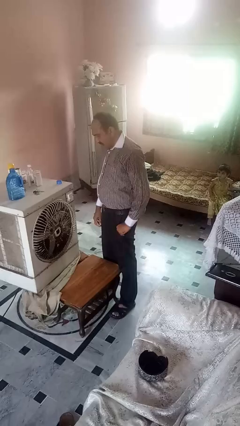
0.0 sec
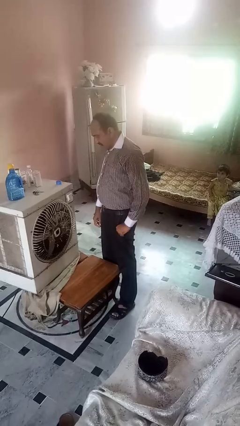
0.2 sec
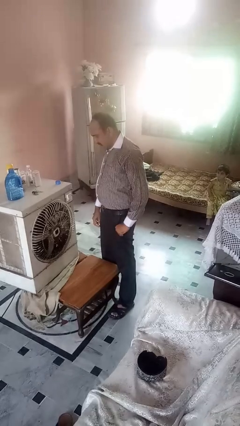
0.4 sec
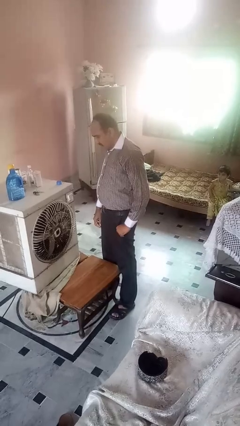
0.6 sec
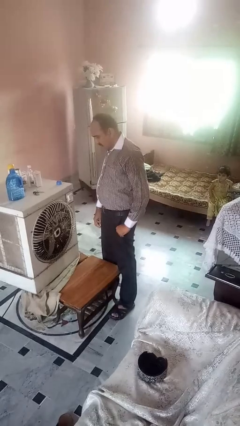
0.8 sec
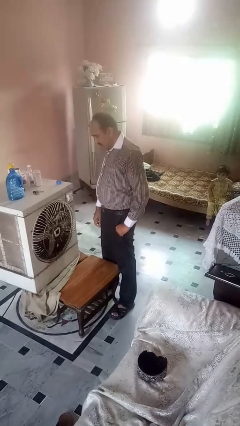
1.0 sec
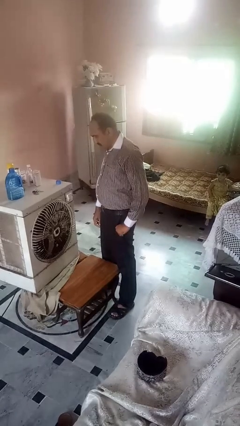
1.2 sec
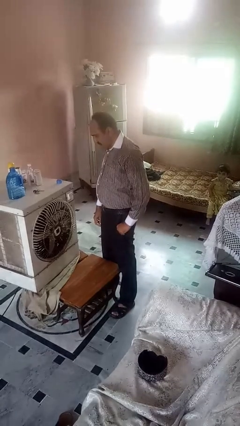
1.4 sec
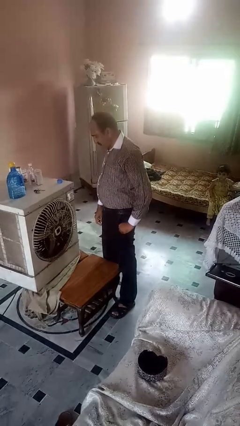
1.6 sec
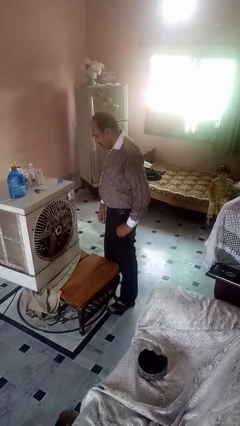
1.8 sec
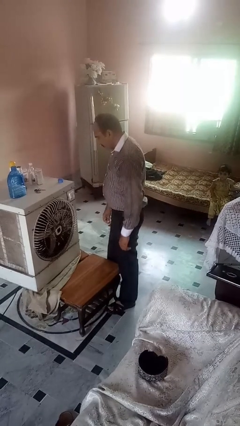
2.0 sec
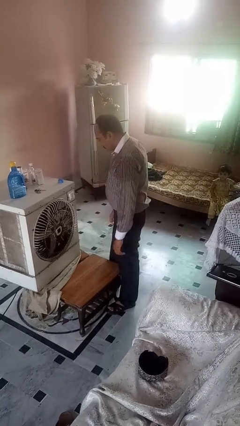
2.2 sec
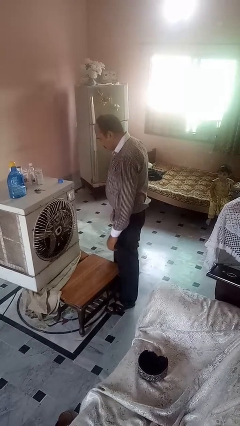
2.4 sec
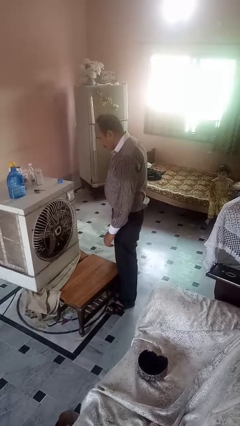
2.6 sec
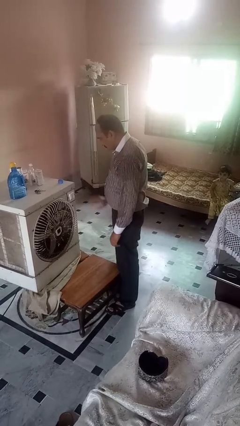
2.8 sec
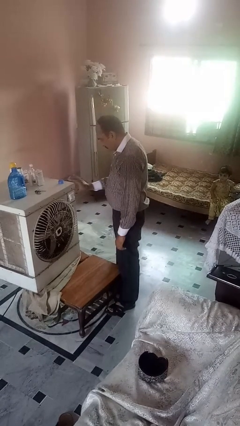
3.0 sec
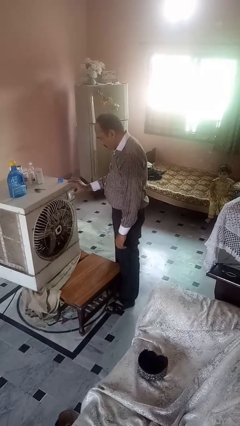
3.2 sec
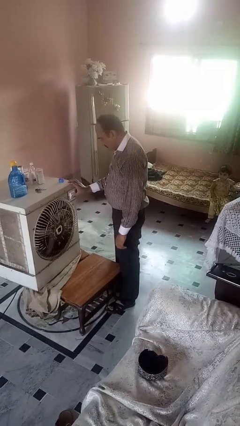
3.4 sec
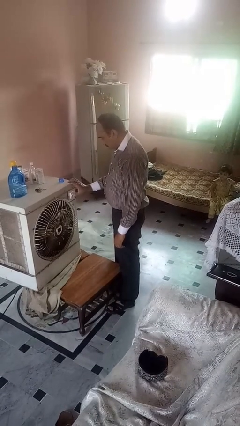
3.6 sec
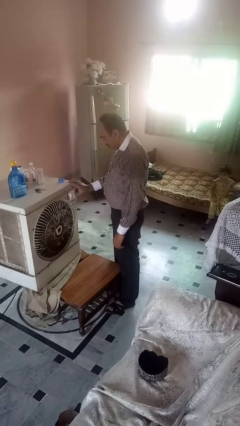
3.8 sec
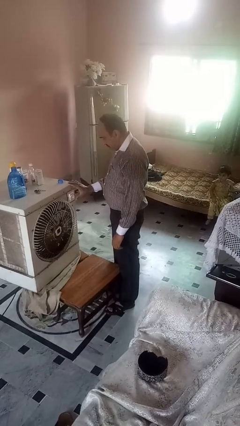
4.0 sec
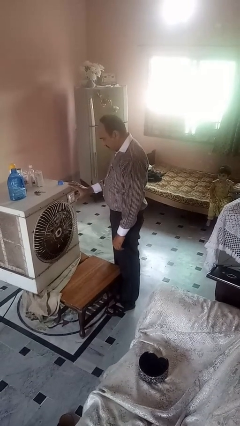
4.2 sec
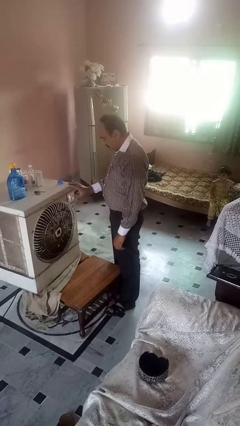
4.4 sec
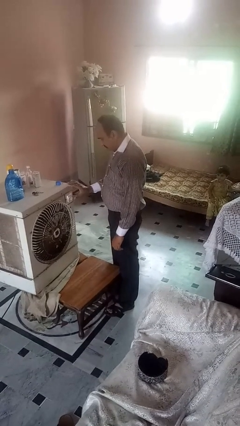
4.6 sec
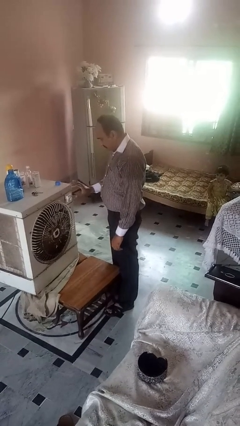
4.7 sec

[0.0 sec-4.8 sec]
person turns on fan

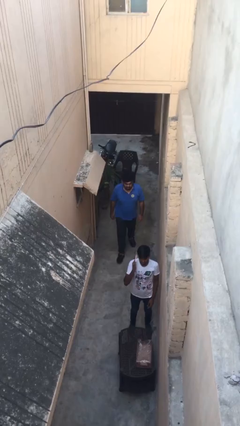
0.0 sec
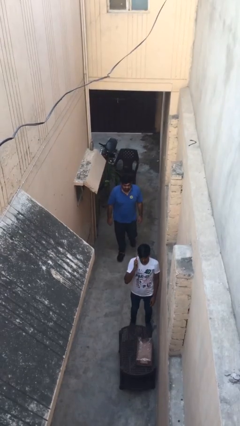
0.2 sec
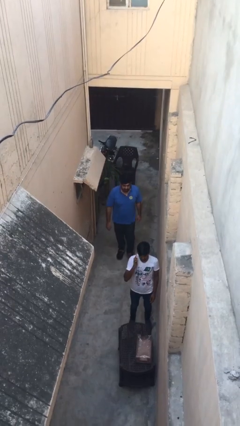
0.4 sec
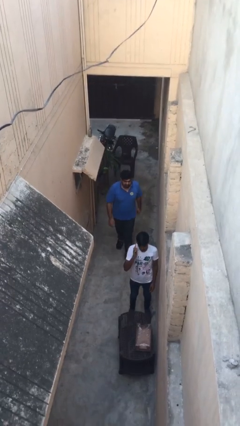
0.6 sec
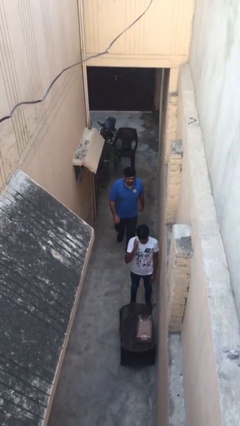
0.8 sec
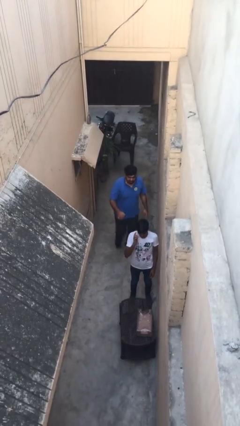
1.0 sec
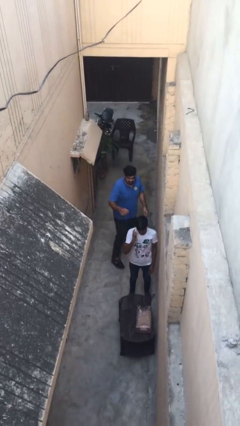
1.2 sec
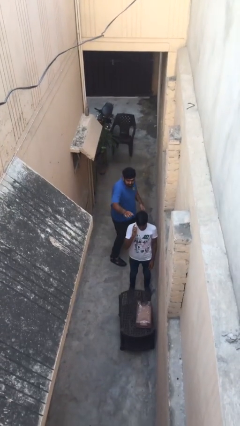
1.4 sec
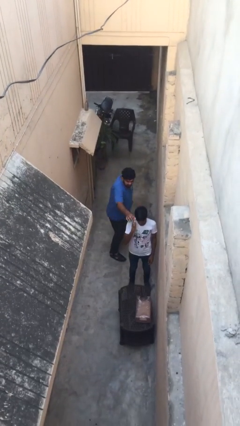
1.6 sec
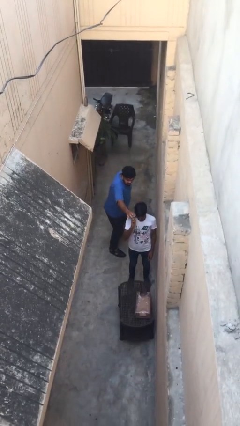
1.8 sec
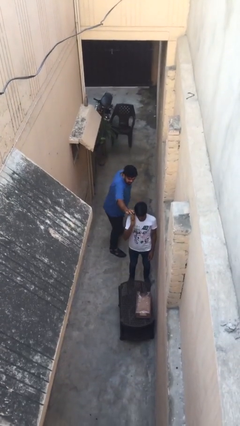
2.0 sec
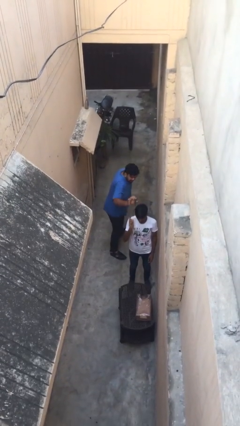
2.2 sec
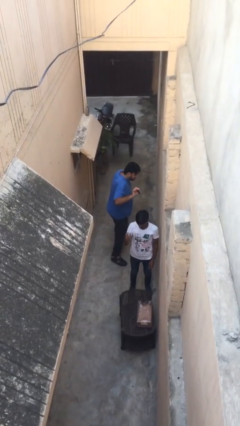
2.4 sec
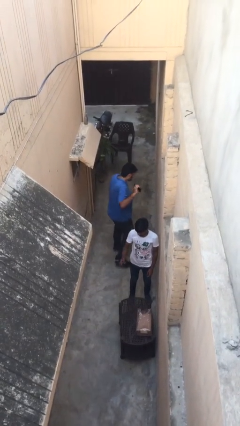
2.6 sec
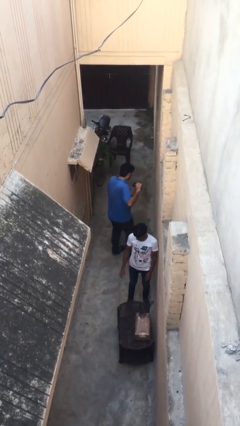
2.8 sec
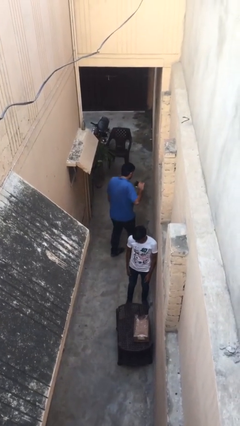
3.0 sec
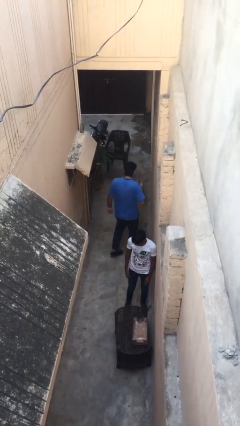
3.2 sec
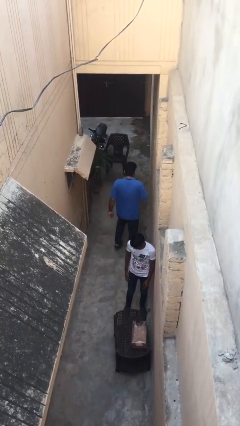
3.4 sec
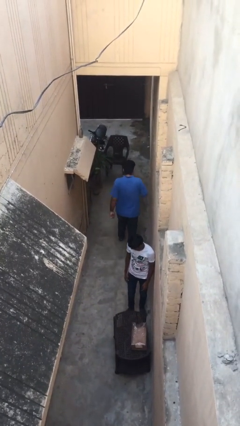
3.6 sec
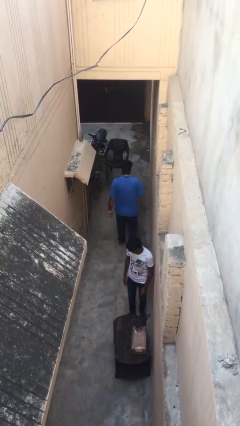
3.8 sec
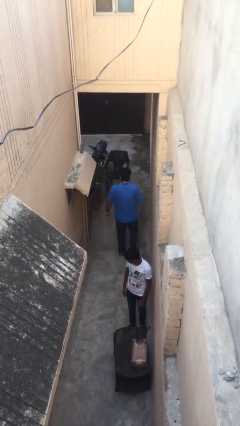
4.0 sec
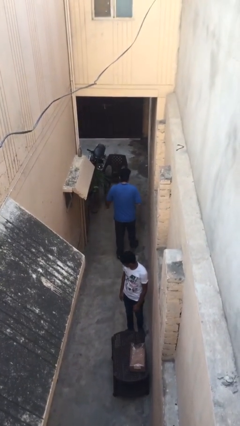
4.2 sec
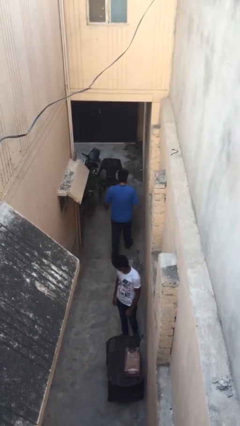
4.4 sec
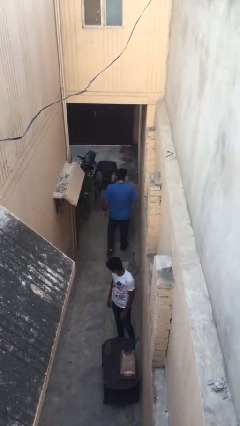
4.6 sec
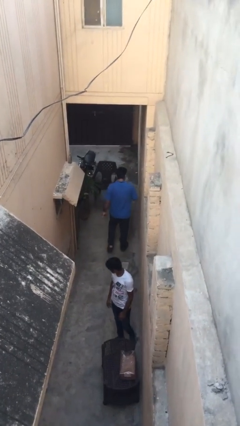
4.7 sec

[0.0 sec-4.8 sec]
person steals object from person

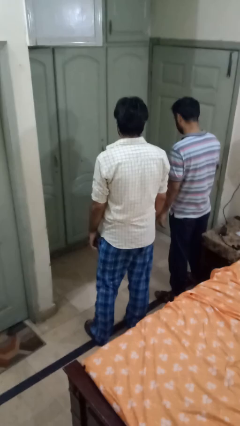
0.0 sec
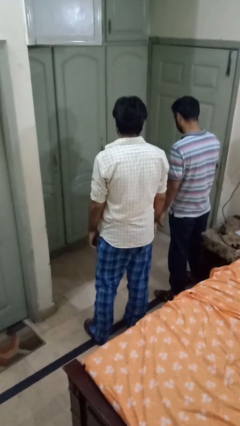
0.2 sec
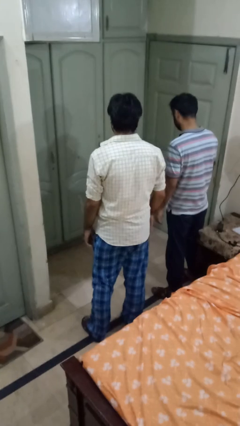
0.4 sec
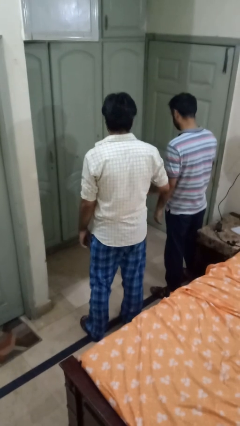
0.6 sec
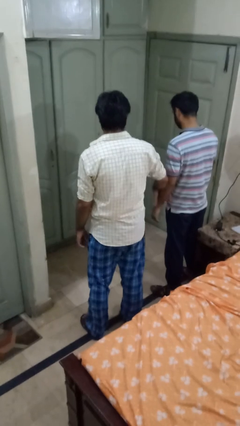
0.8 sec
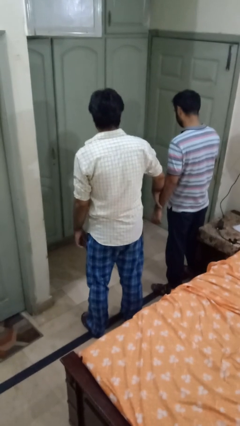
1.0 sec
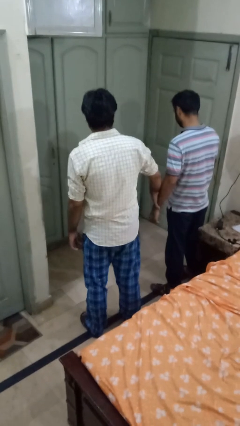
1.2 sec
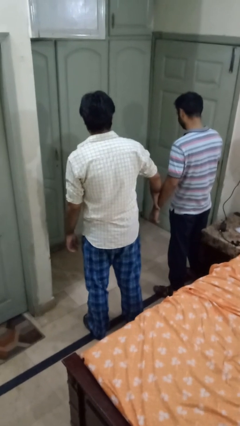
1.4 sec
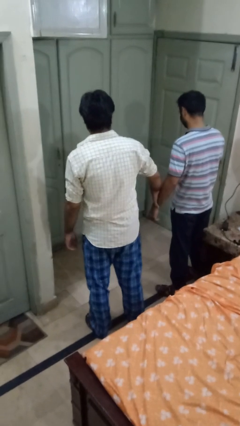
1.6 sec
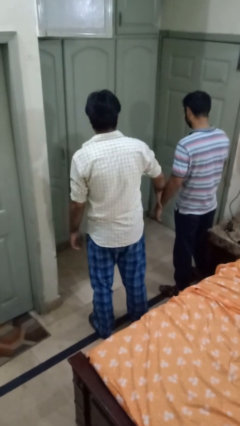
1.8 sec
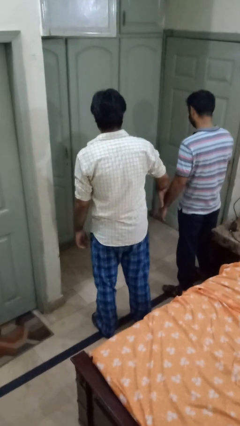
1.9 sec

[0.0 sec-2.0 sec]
person grabs person by forearm

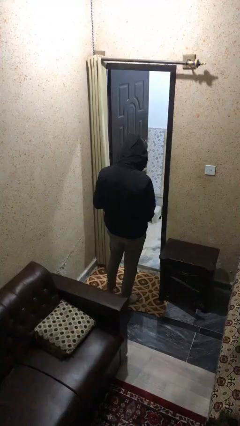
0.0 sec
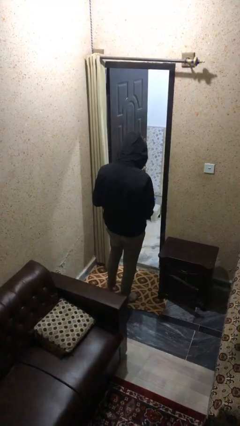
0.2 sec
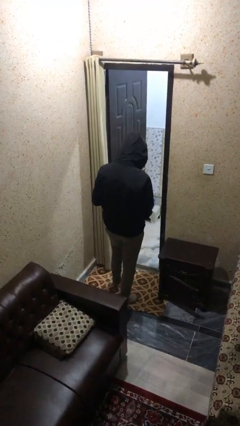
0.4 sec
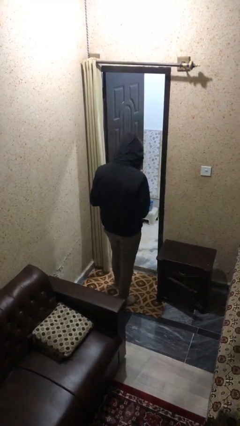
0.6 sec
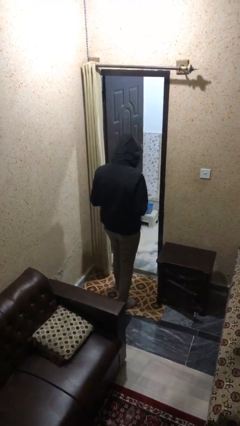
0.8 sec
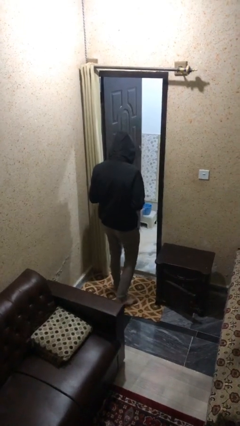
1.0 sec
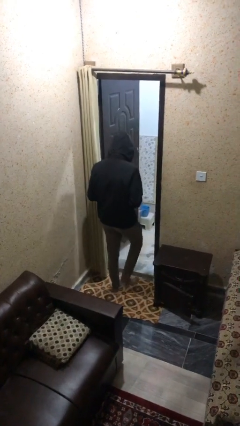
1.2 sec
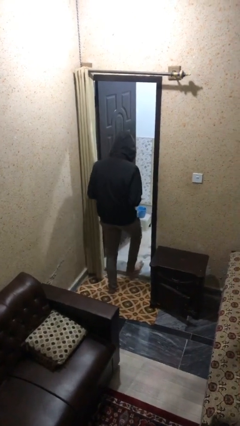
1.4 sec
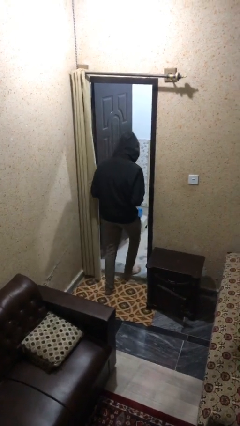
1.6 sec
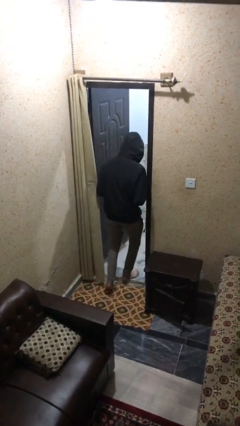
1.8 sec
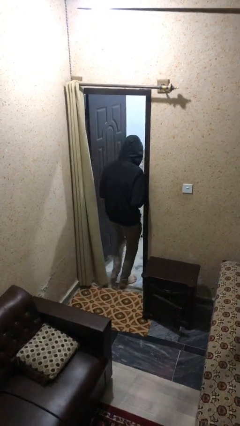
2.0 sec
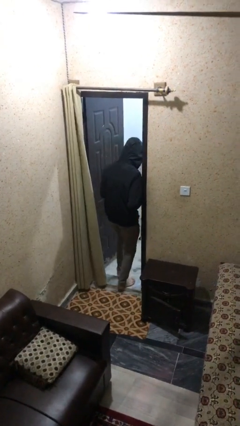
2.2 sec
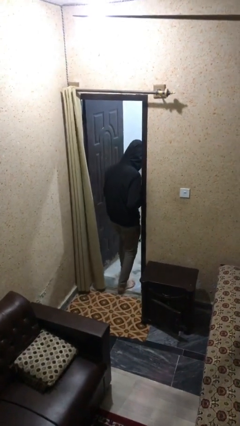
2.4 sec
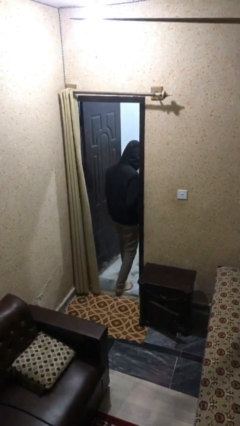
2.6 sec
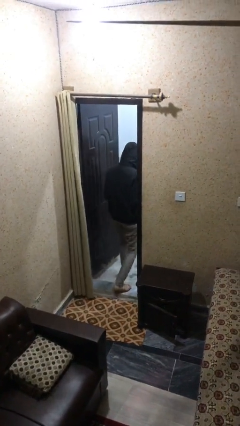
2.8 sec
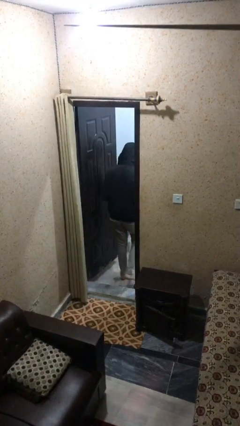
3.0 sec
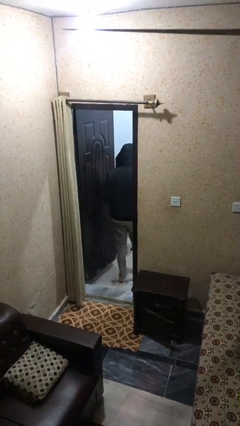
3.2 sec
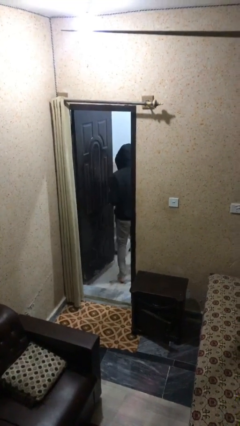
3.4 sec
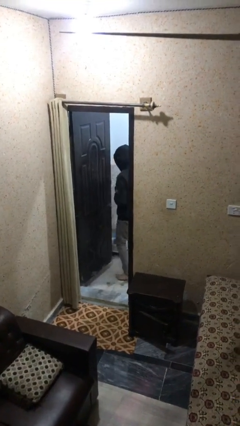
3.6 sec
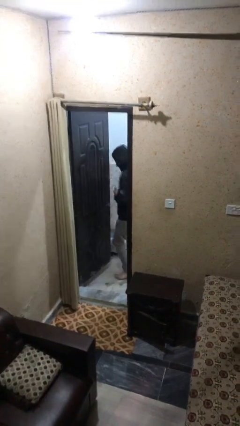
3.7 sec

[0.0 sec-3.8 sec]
person enters scene through structure

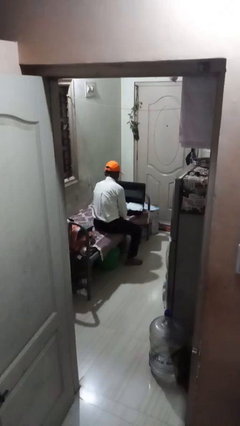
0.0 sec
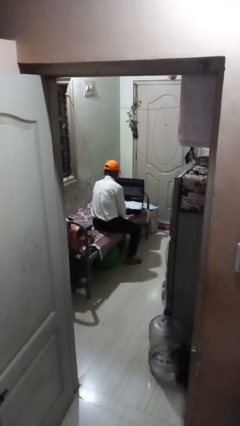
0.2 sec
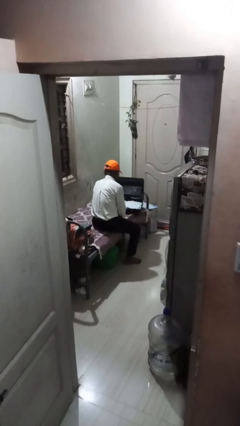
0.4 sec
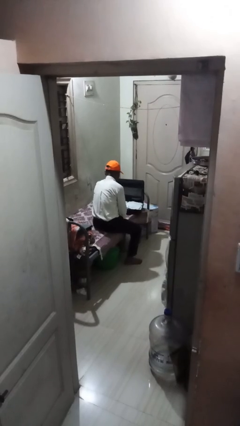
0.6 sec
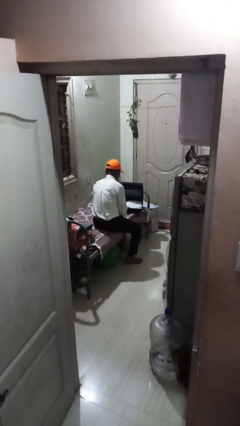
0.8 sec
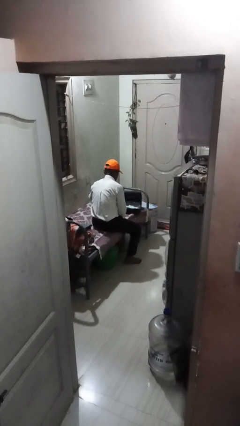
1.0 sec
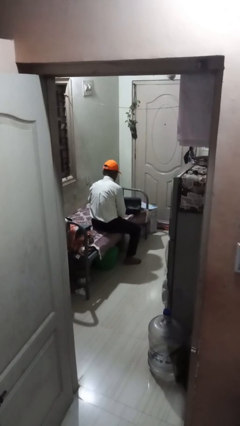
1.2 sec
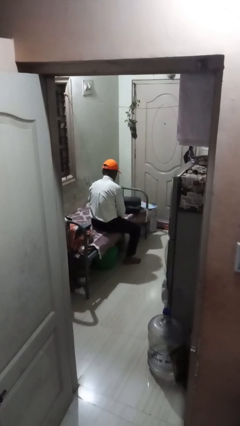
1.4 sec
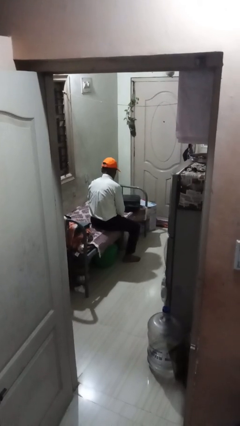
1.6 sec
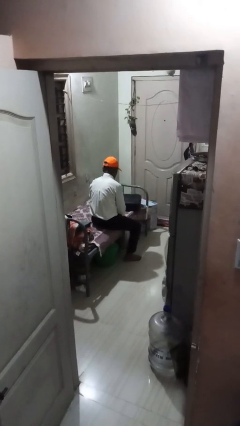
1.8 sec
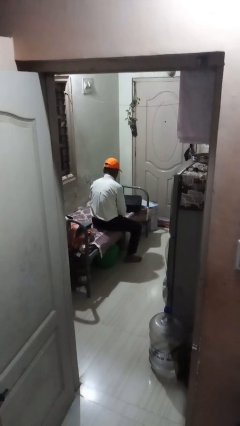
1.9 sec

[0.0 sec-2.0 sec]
person closes suitcase

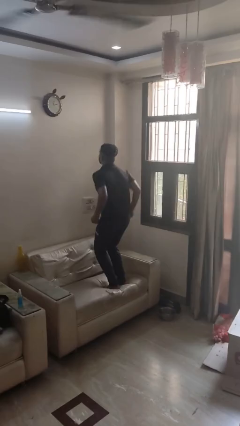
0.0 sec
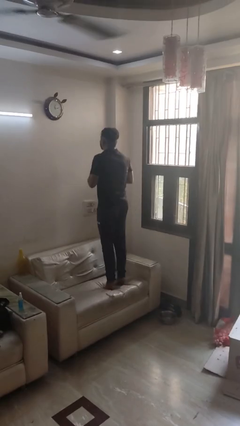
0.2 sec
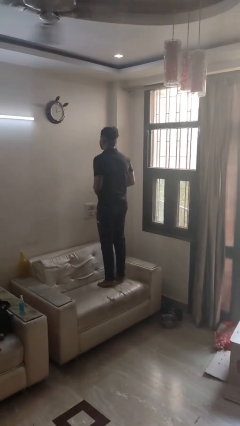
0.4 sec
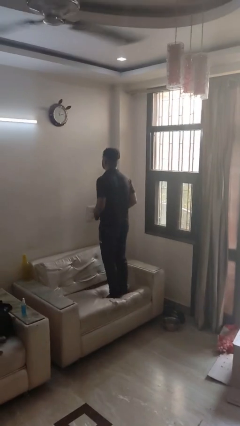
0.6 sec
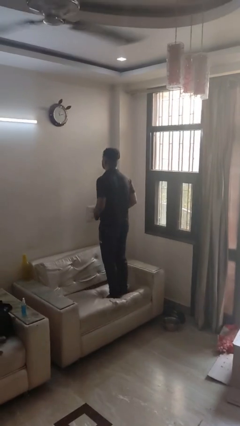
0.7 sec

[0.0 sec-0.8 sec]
person jumps on couch
